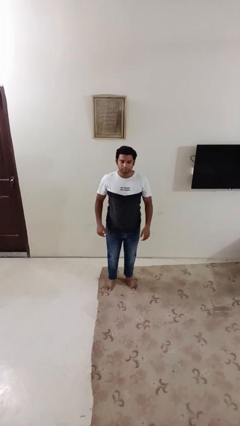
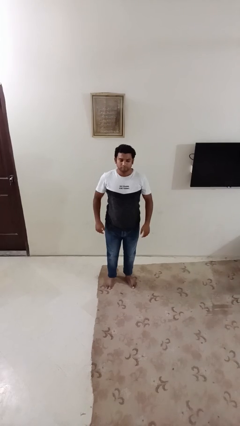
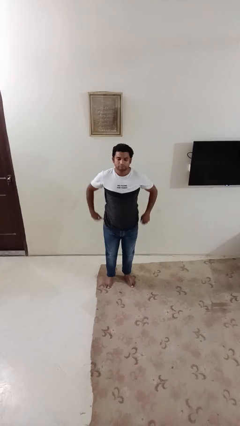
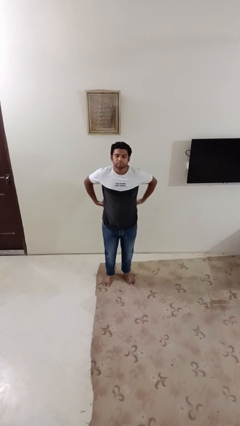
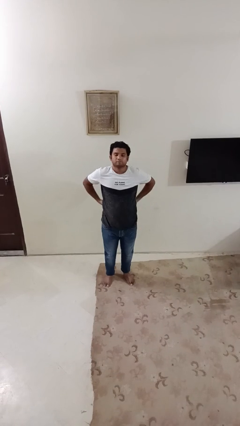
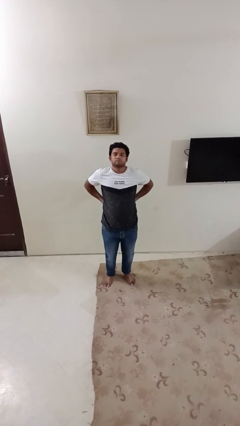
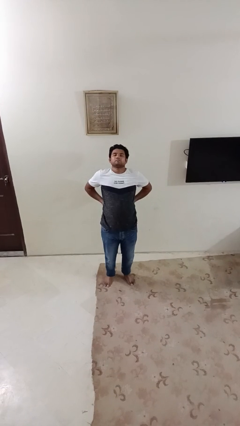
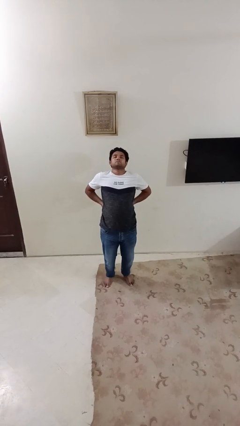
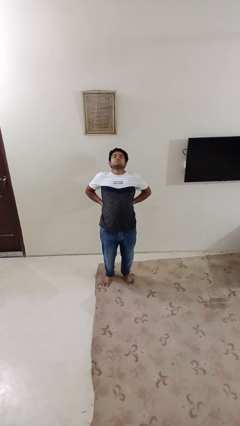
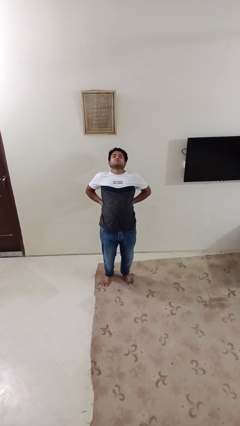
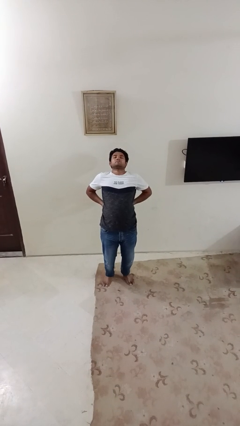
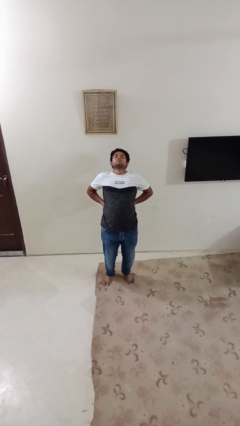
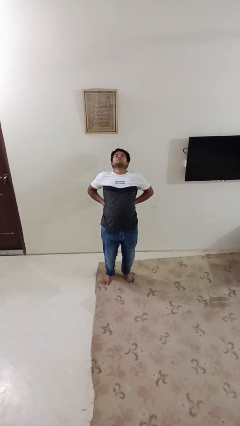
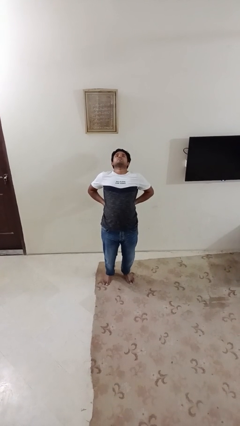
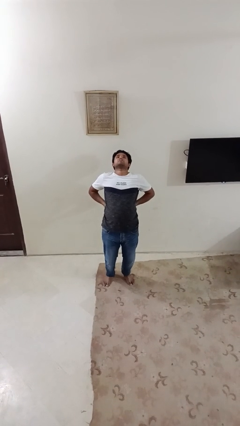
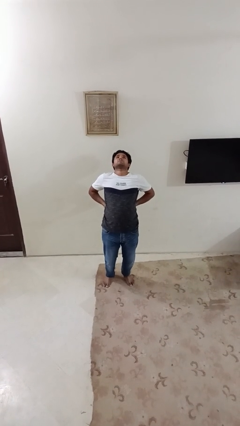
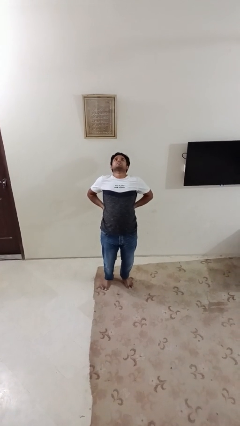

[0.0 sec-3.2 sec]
person stretches back

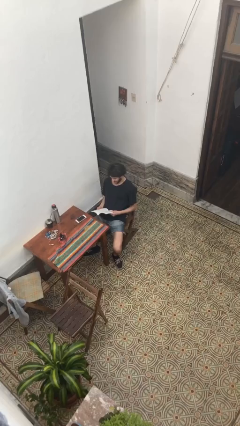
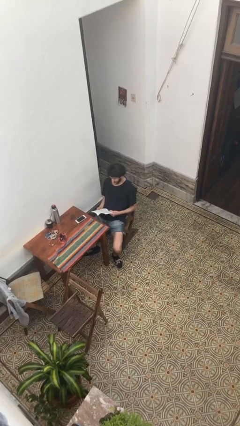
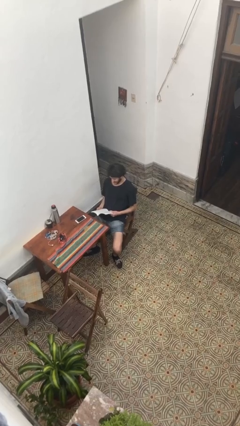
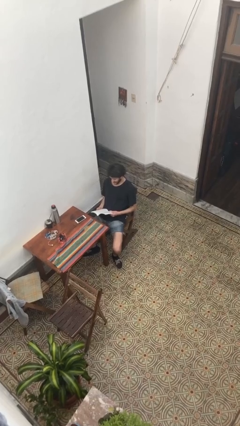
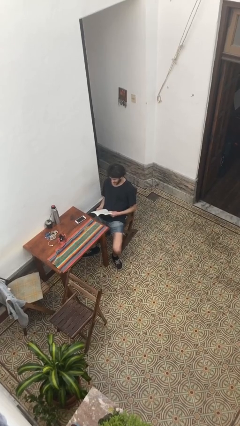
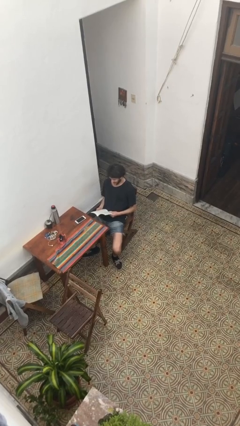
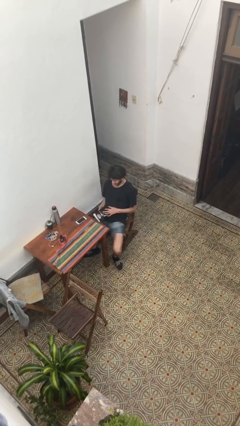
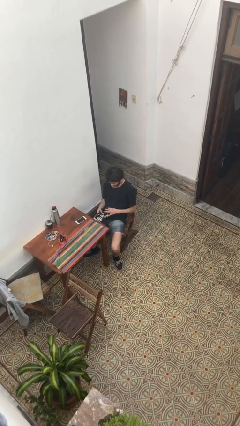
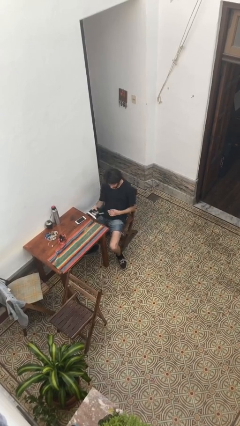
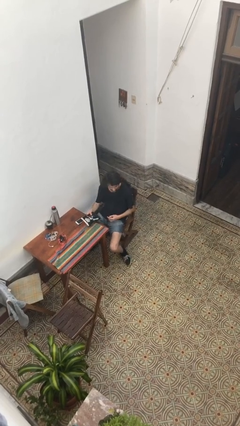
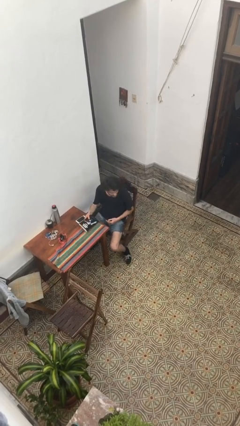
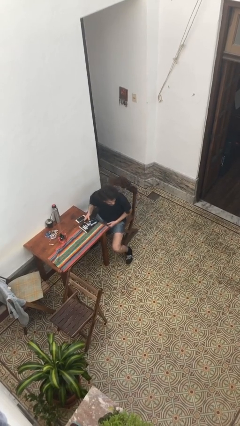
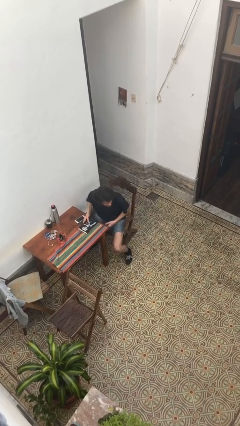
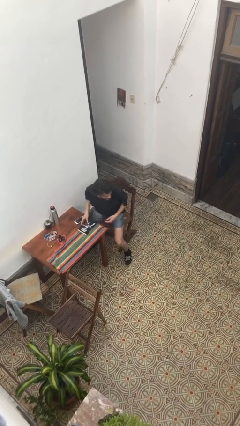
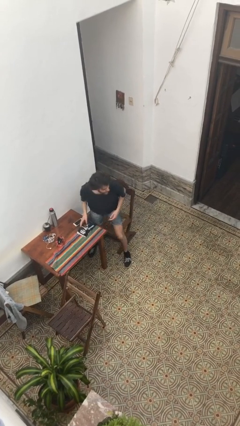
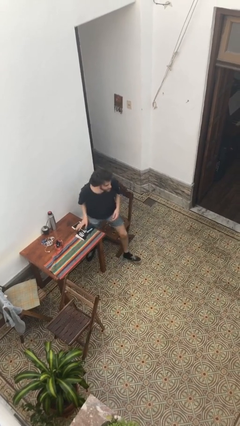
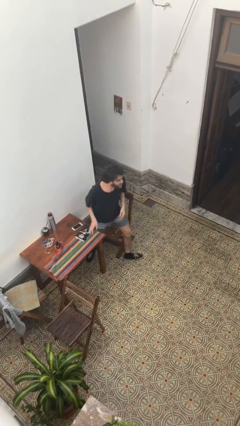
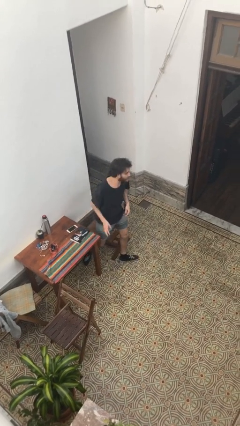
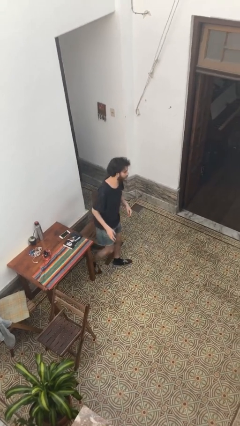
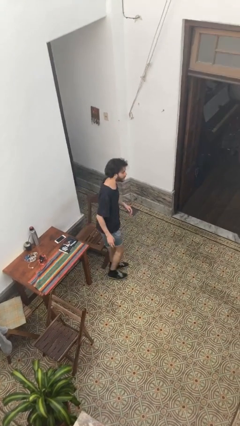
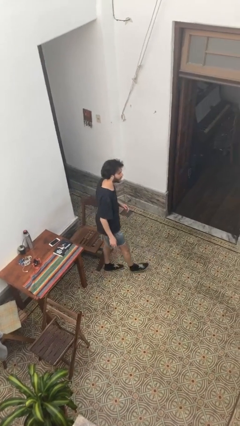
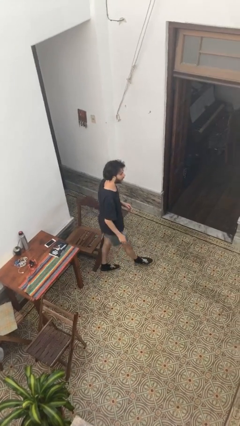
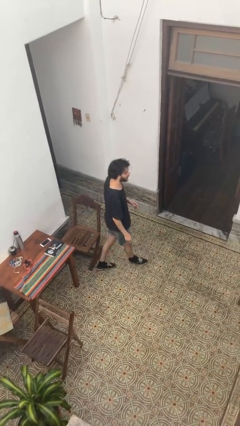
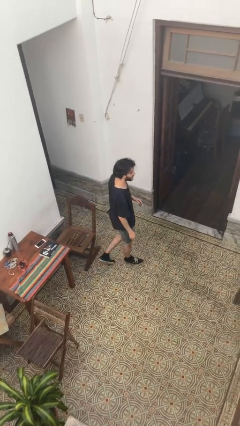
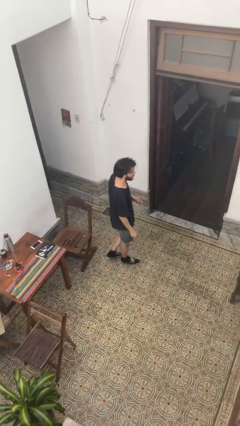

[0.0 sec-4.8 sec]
person stands up

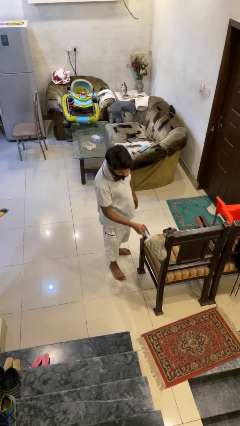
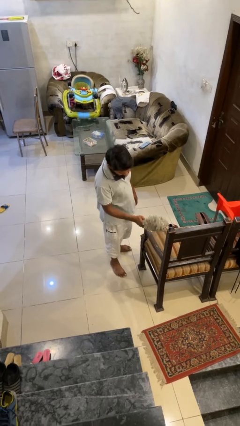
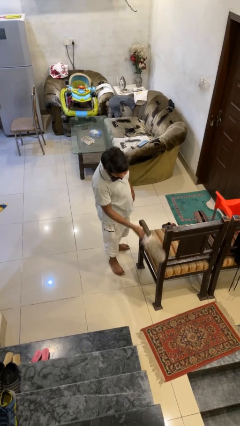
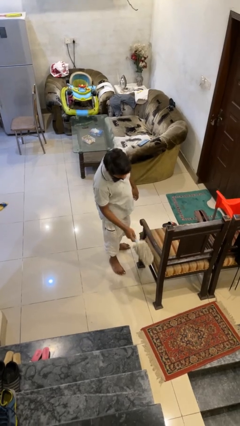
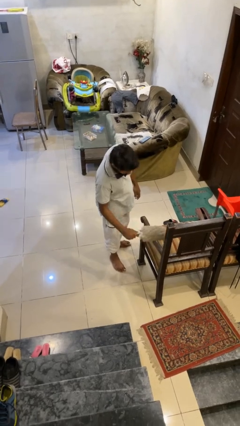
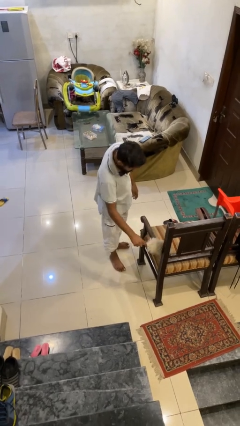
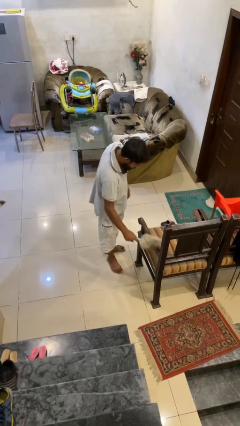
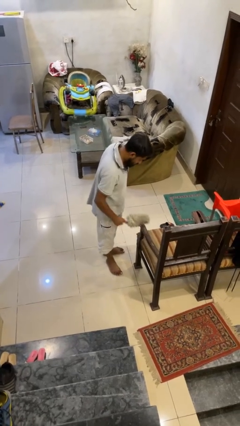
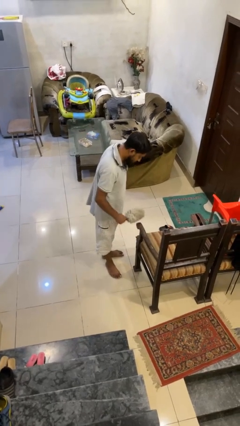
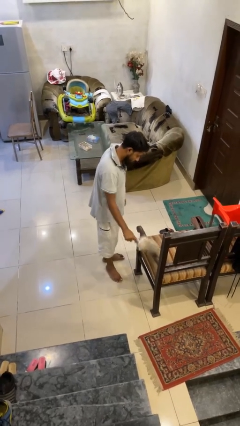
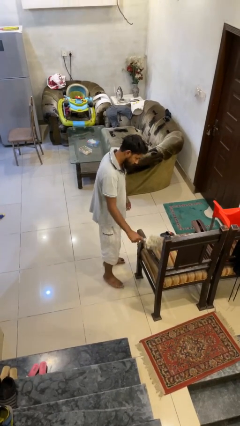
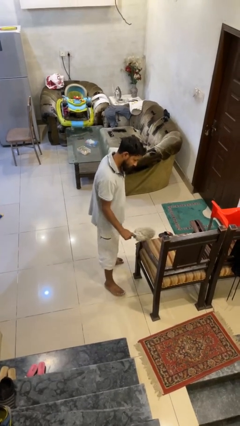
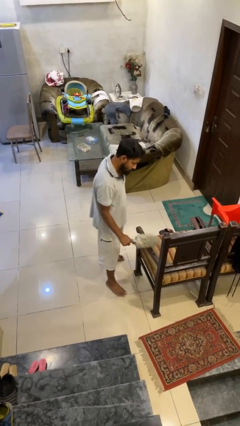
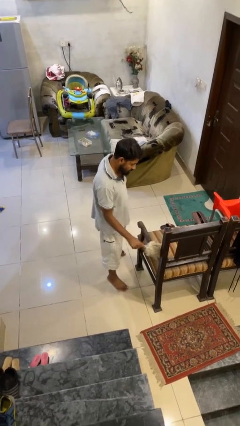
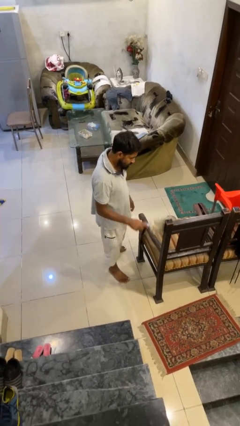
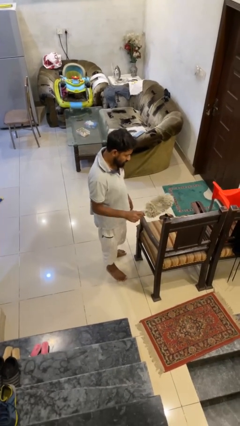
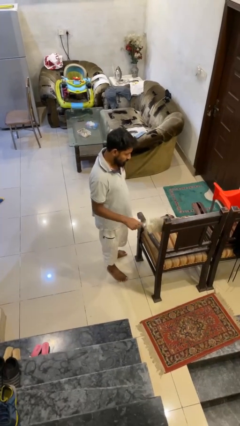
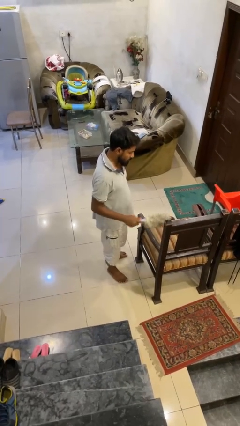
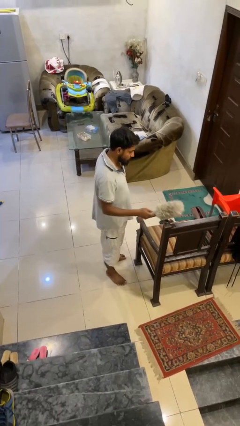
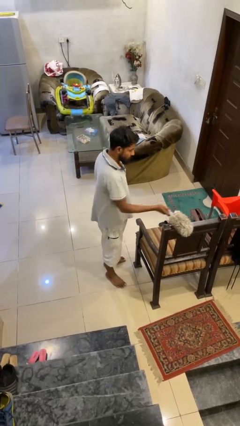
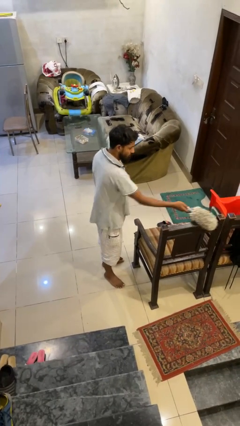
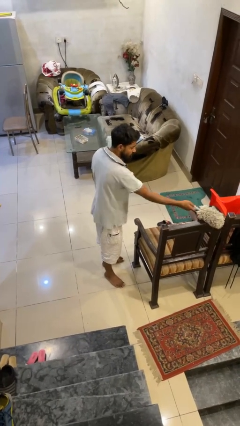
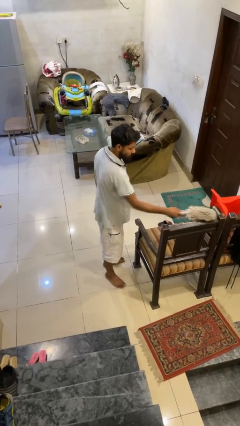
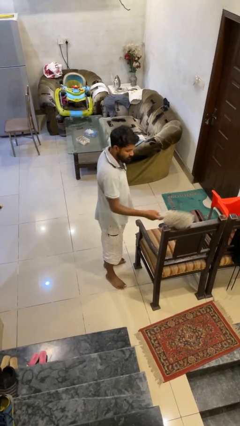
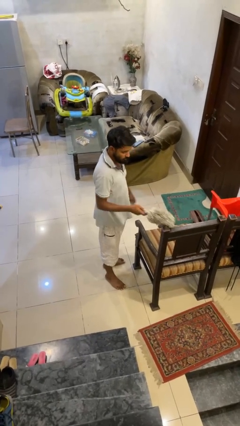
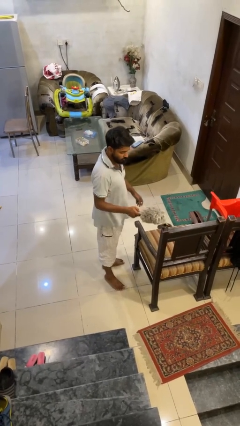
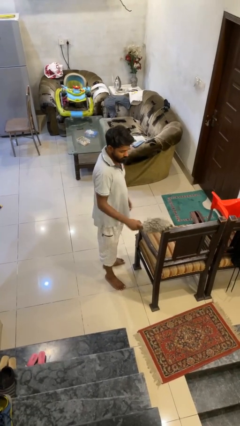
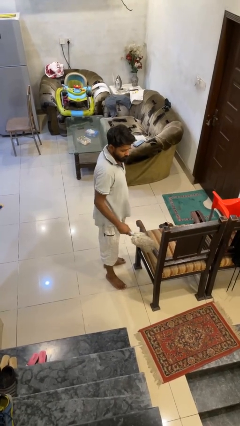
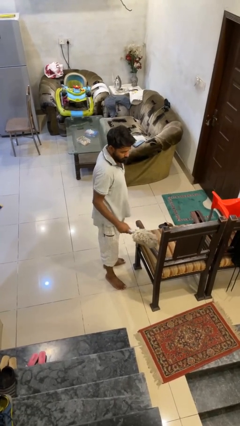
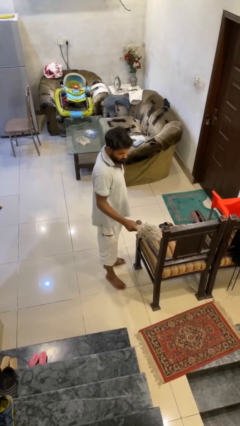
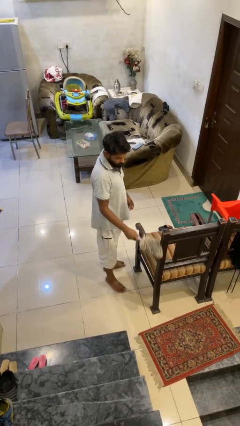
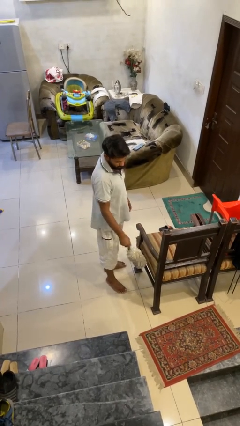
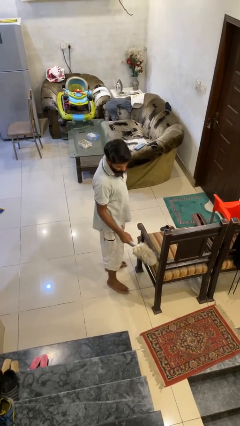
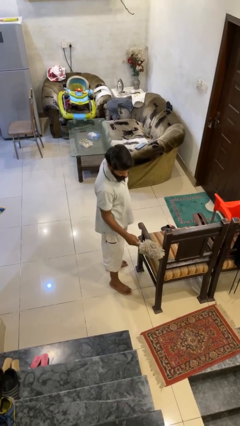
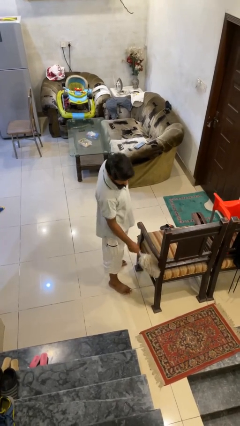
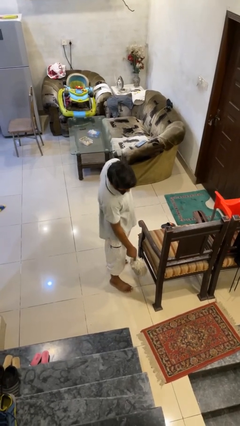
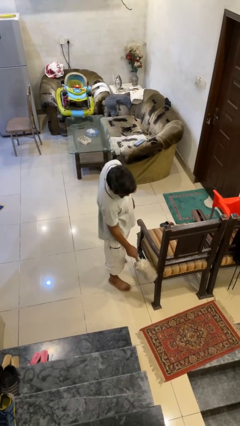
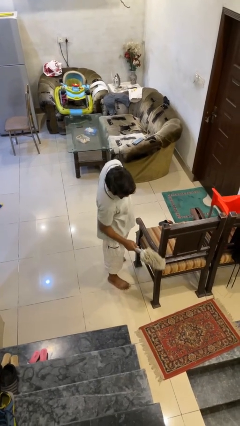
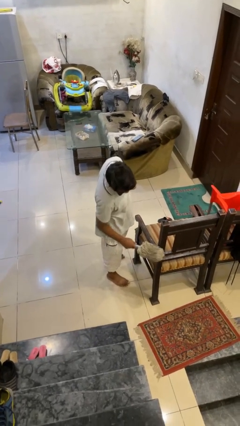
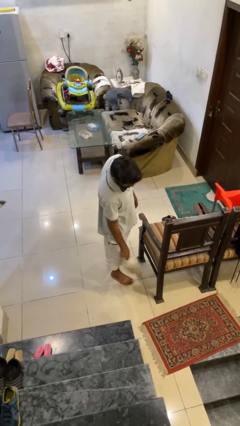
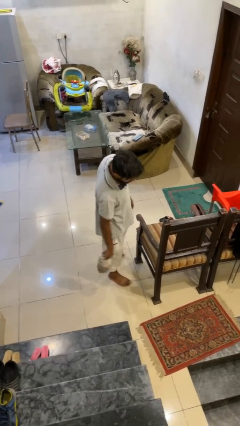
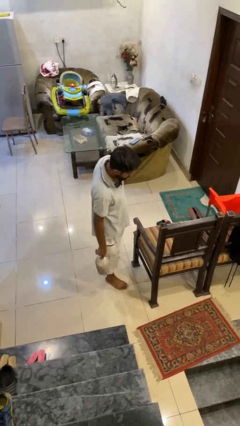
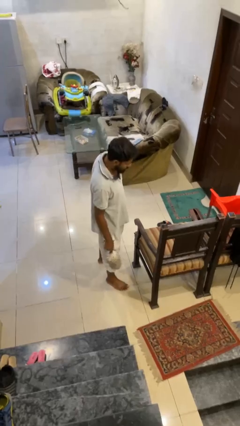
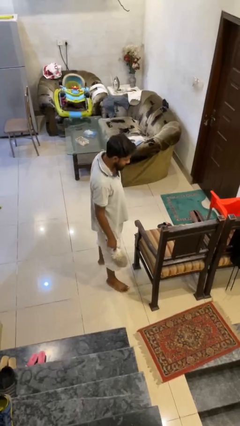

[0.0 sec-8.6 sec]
person dusts furniture

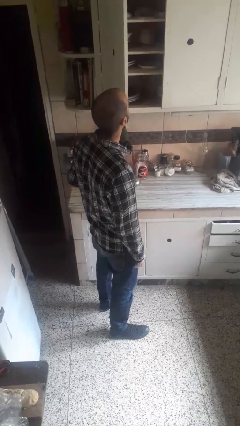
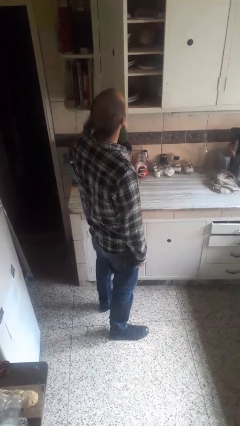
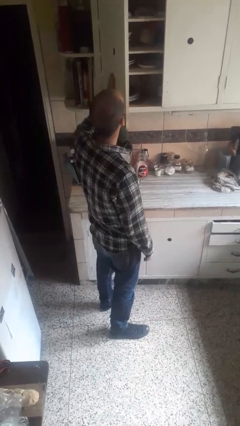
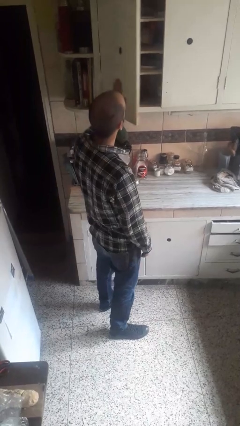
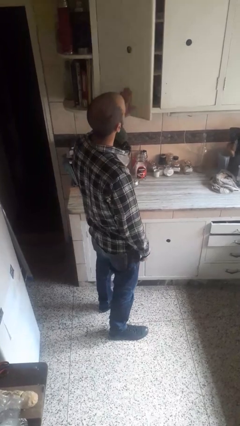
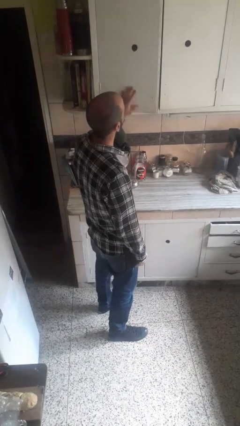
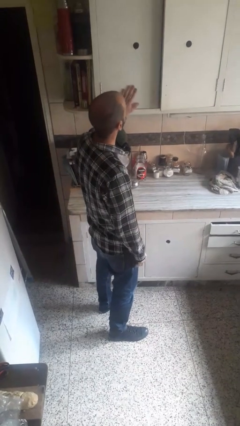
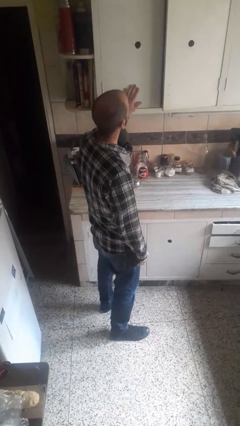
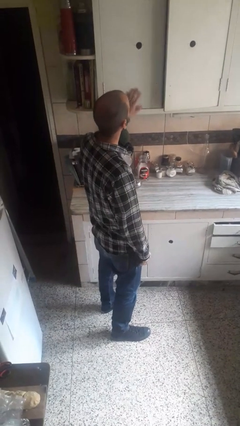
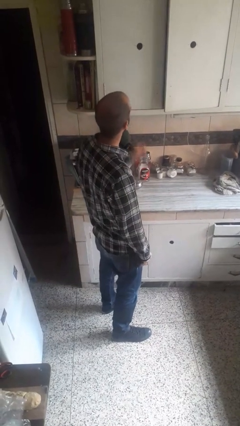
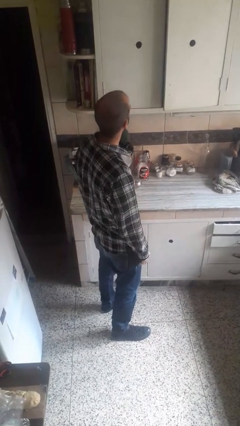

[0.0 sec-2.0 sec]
person closes closet door
